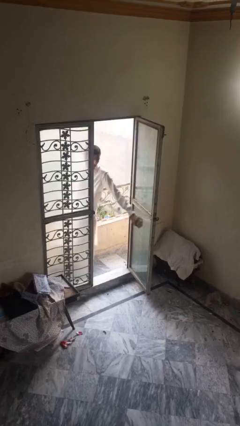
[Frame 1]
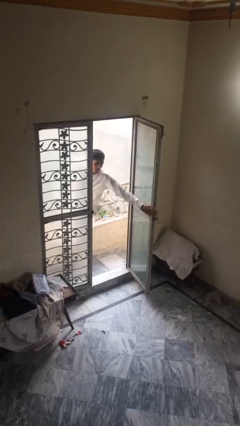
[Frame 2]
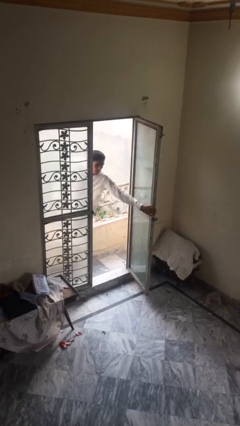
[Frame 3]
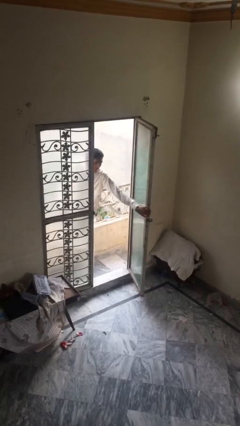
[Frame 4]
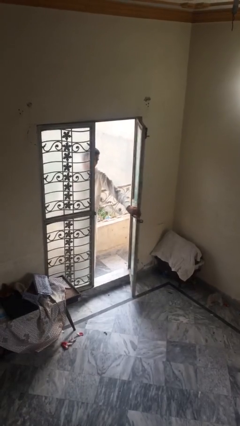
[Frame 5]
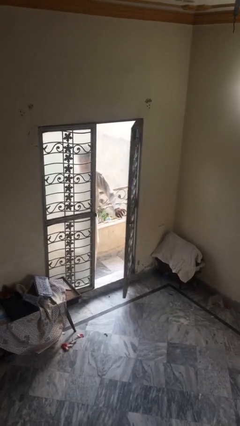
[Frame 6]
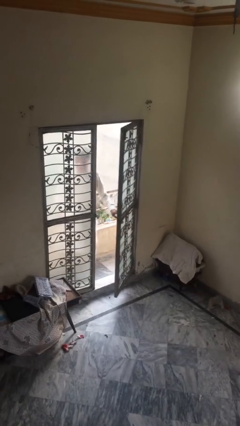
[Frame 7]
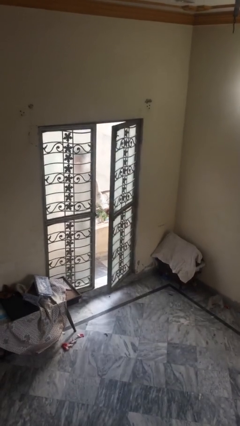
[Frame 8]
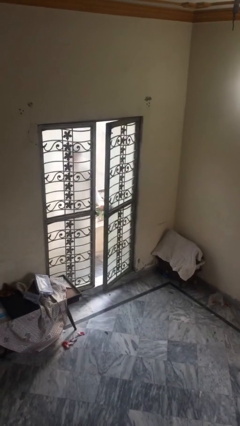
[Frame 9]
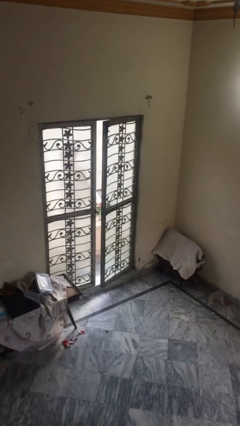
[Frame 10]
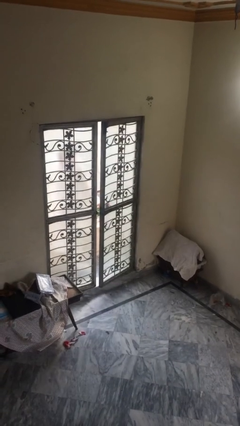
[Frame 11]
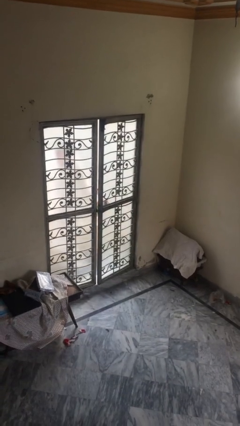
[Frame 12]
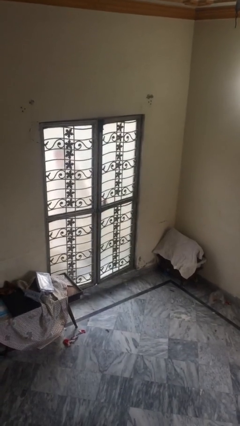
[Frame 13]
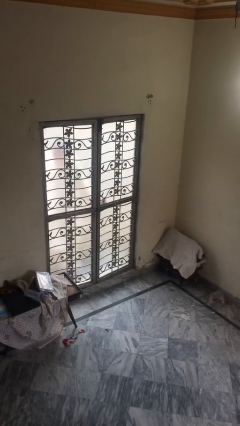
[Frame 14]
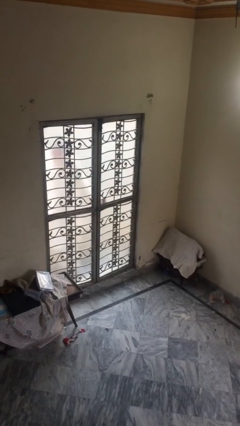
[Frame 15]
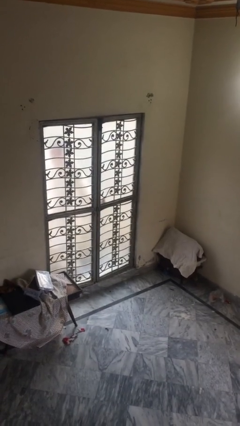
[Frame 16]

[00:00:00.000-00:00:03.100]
person closes facility door

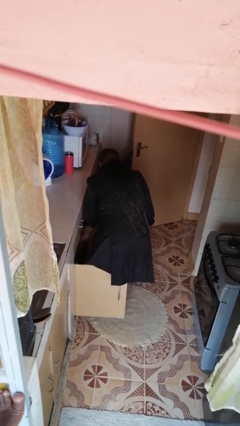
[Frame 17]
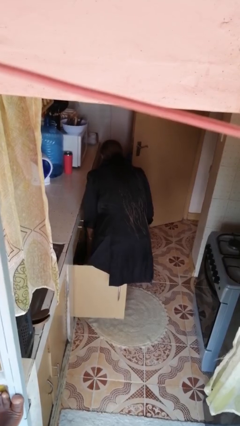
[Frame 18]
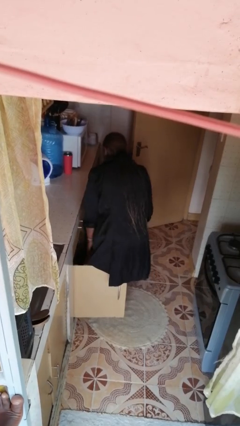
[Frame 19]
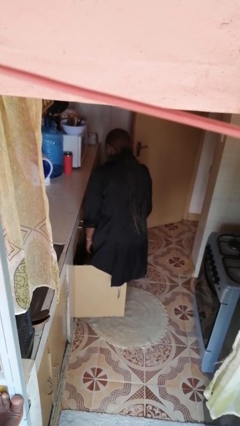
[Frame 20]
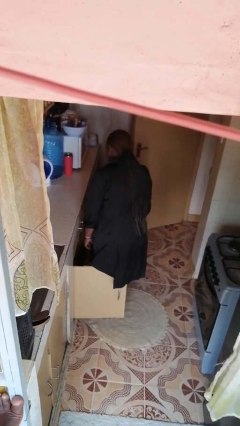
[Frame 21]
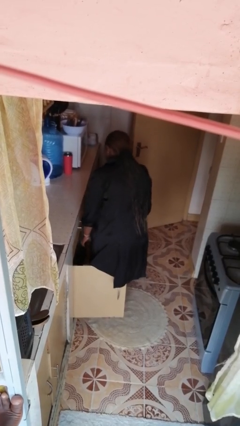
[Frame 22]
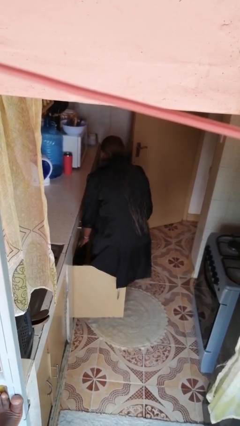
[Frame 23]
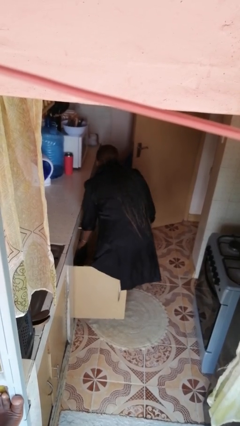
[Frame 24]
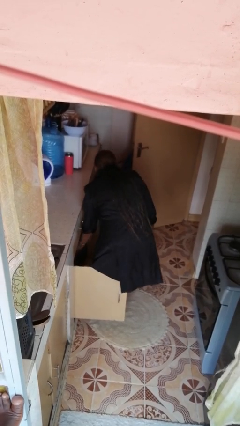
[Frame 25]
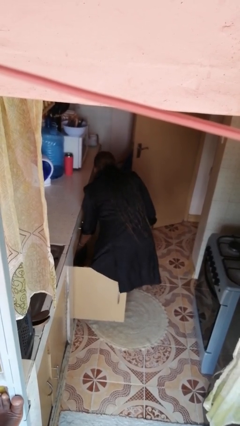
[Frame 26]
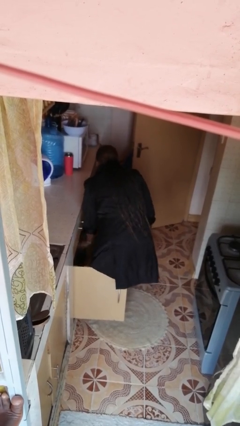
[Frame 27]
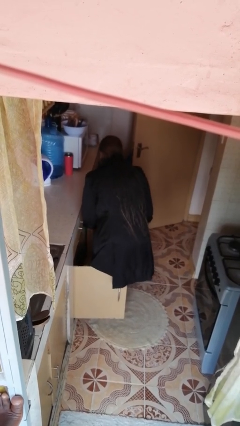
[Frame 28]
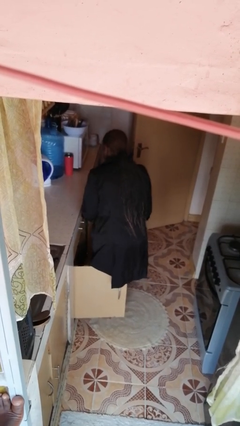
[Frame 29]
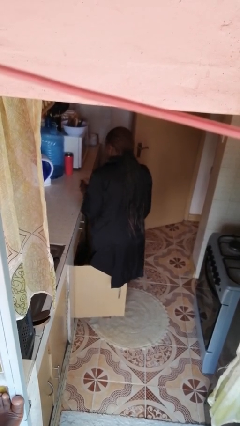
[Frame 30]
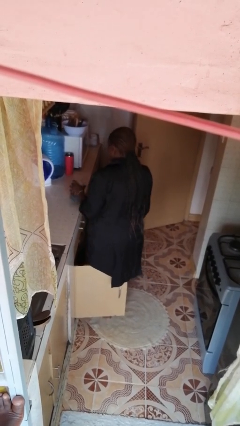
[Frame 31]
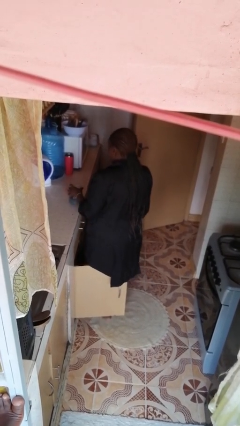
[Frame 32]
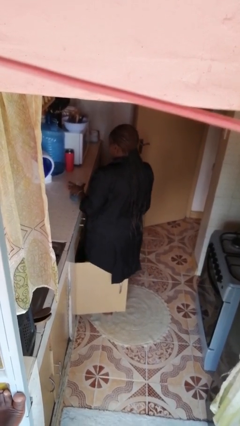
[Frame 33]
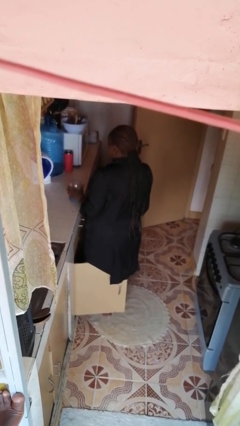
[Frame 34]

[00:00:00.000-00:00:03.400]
person takes object from cabinet

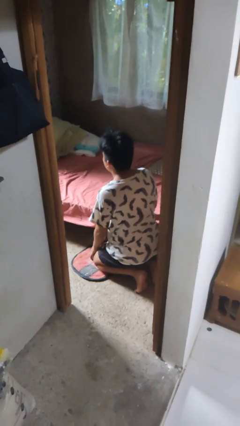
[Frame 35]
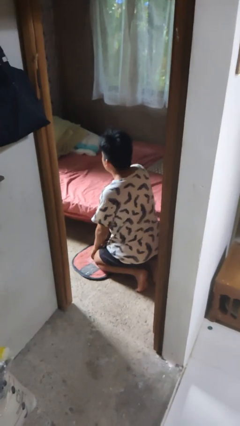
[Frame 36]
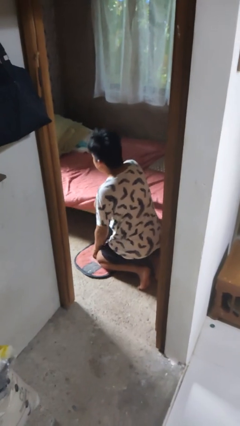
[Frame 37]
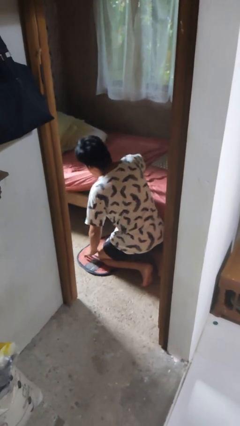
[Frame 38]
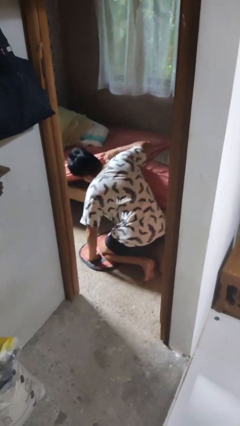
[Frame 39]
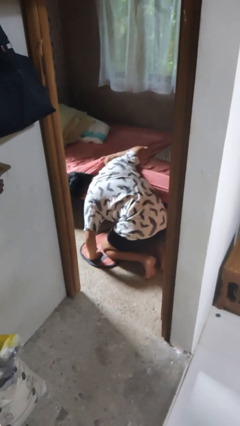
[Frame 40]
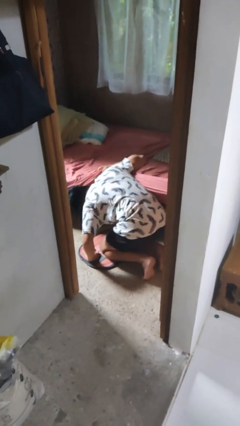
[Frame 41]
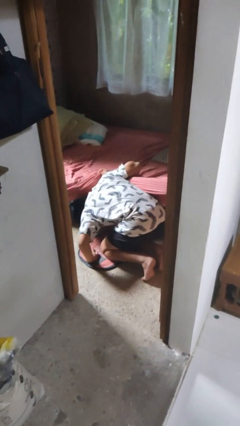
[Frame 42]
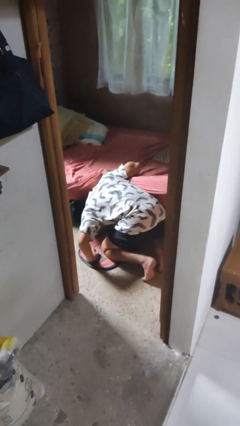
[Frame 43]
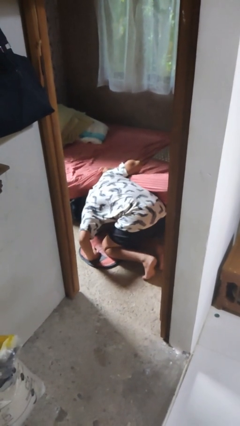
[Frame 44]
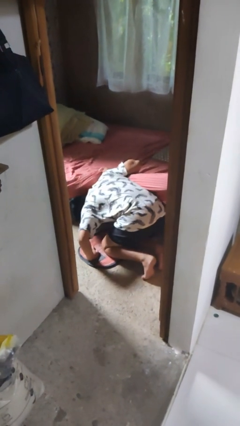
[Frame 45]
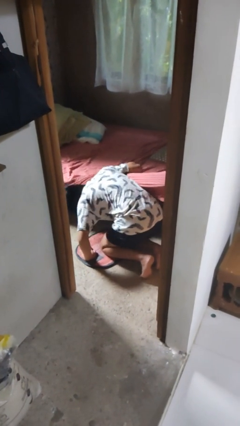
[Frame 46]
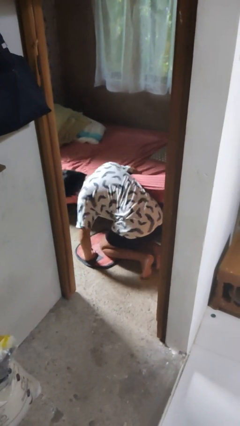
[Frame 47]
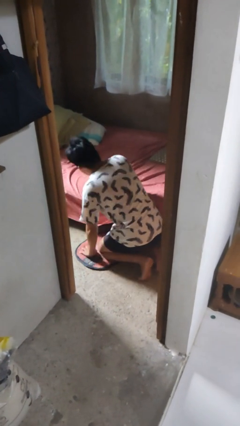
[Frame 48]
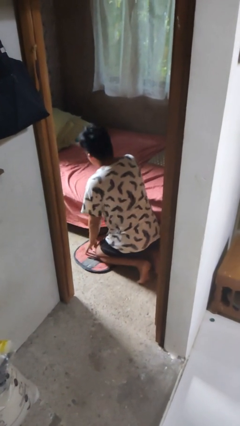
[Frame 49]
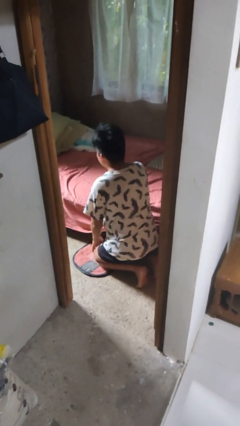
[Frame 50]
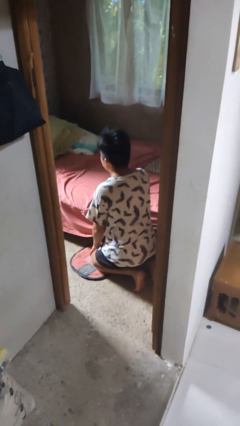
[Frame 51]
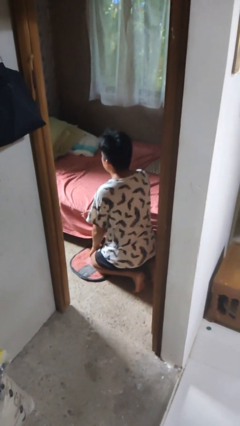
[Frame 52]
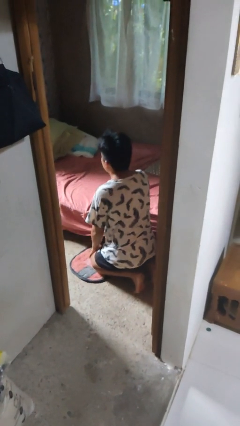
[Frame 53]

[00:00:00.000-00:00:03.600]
person searches under bed

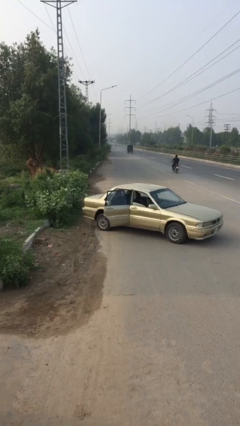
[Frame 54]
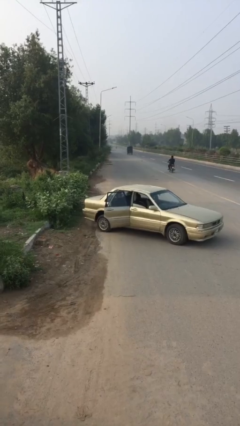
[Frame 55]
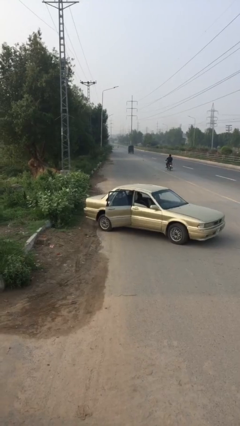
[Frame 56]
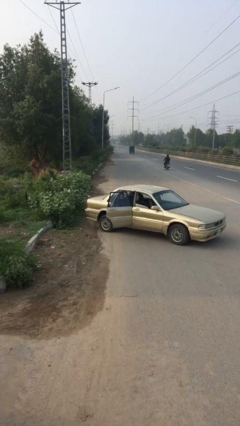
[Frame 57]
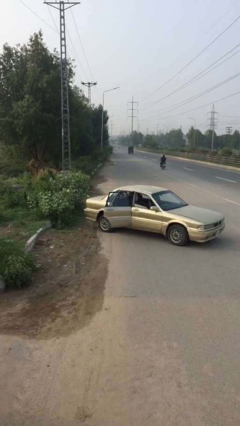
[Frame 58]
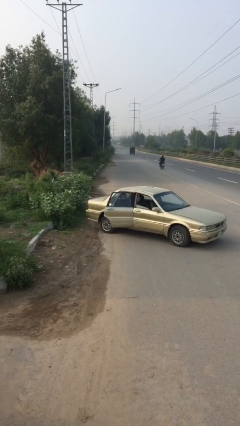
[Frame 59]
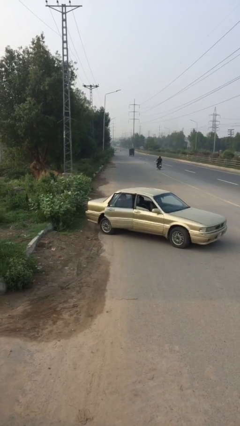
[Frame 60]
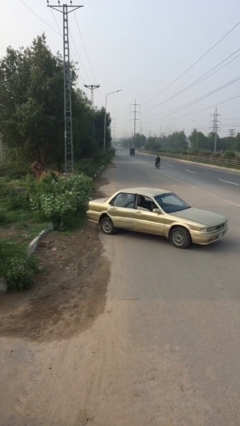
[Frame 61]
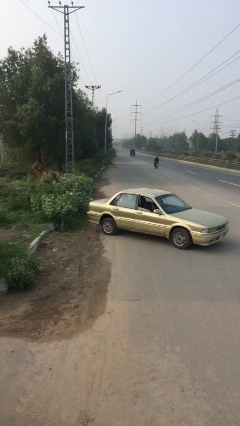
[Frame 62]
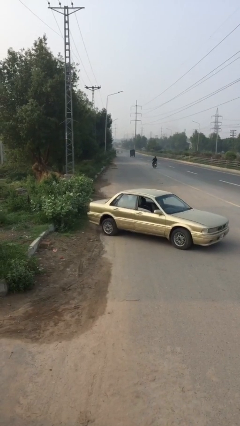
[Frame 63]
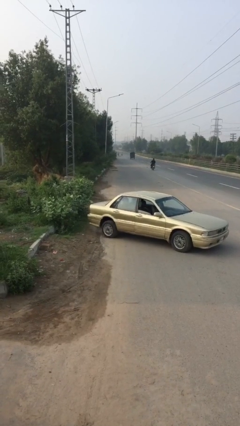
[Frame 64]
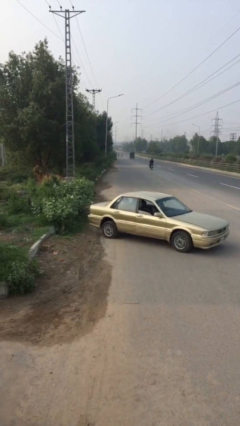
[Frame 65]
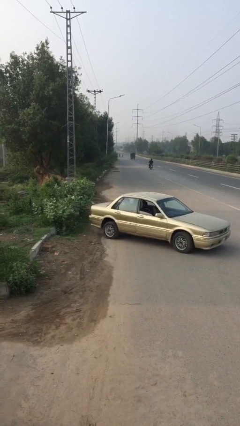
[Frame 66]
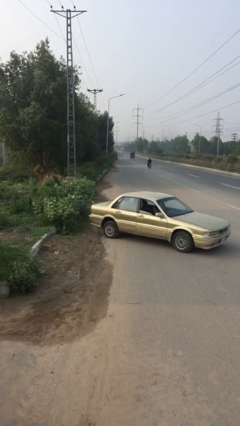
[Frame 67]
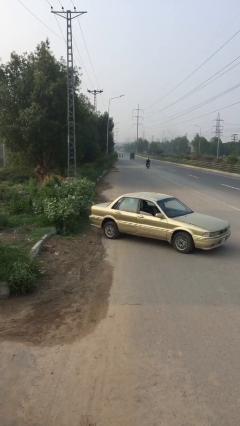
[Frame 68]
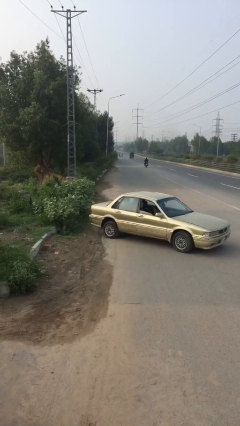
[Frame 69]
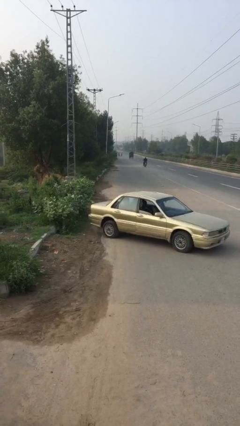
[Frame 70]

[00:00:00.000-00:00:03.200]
person closes car door

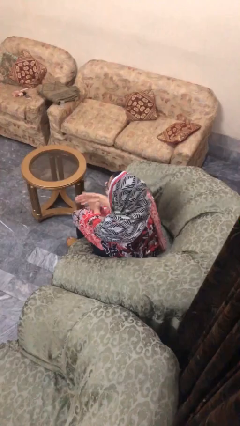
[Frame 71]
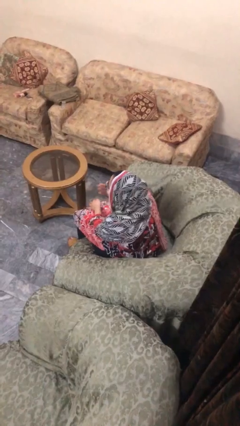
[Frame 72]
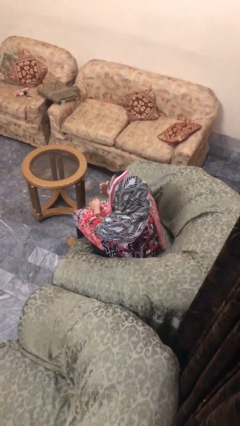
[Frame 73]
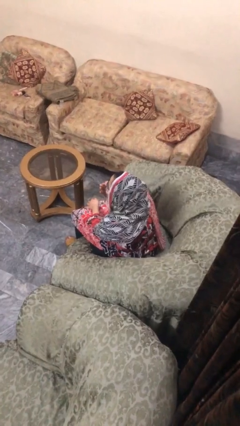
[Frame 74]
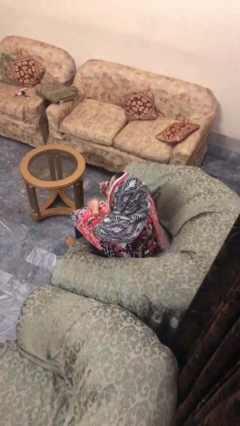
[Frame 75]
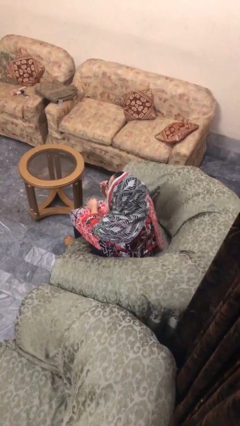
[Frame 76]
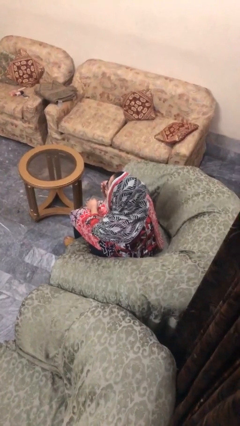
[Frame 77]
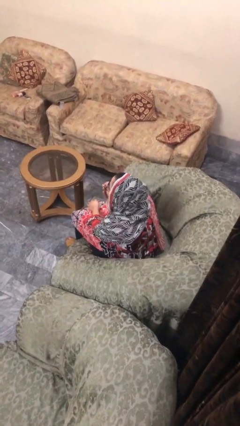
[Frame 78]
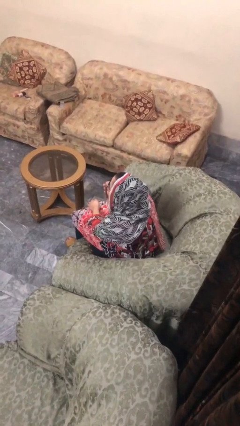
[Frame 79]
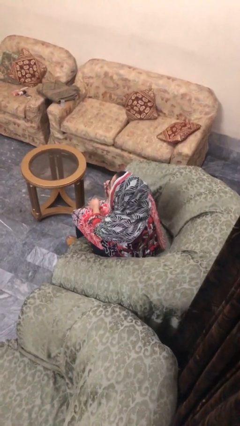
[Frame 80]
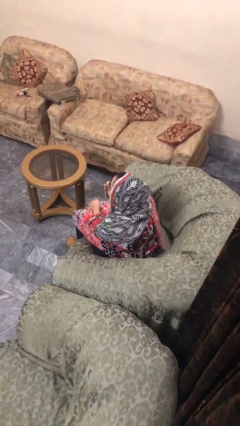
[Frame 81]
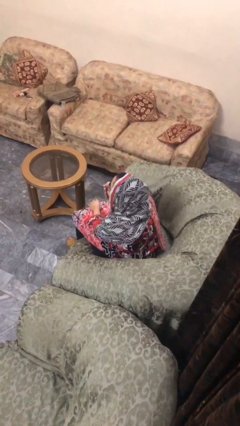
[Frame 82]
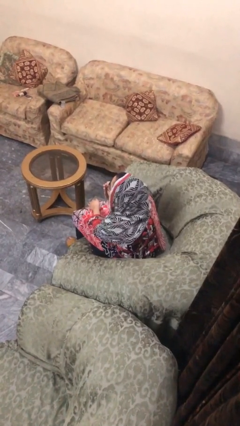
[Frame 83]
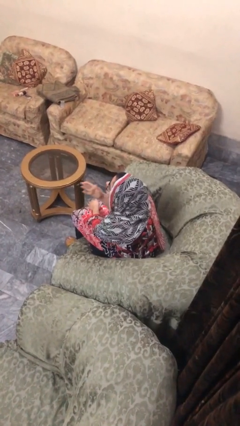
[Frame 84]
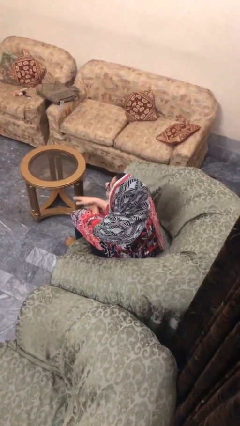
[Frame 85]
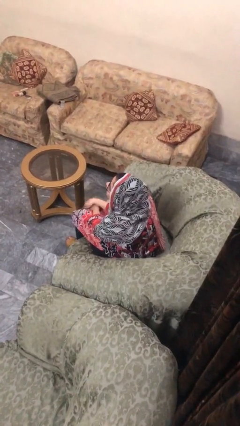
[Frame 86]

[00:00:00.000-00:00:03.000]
person yawns

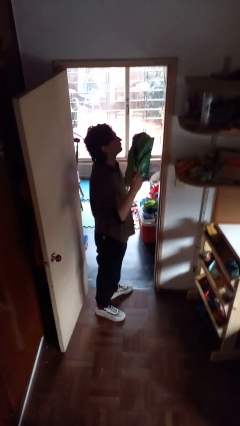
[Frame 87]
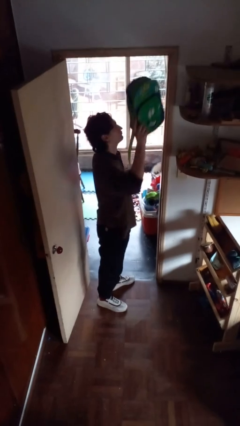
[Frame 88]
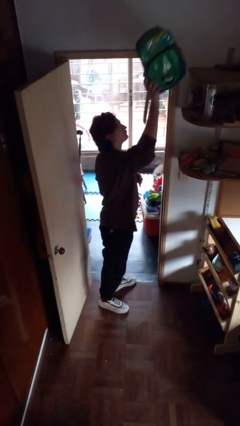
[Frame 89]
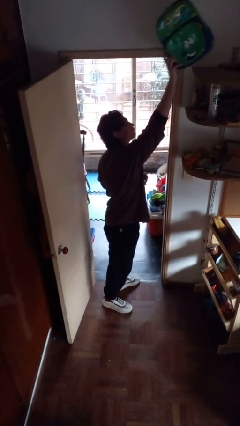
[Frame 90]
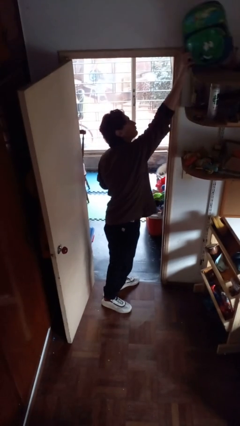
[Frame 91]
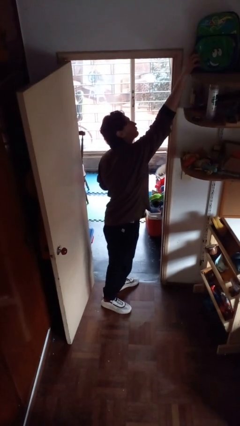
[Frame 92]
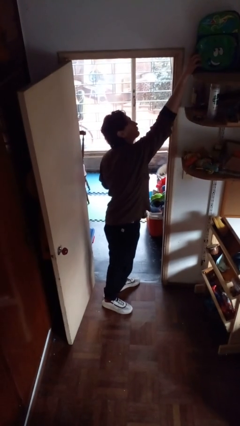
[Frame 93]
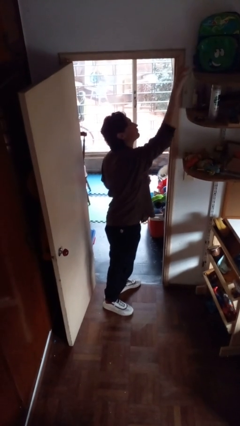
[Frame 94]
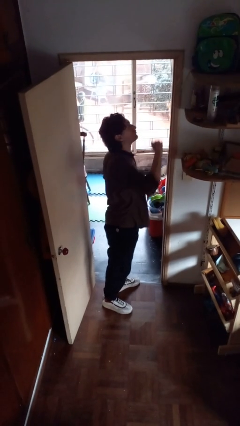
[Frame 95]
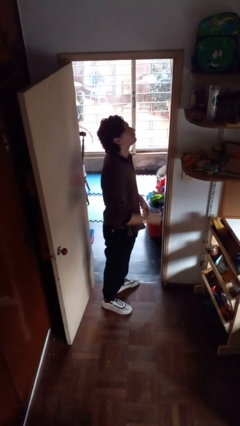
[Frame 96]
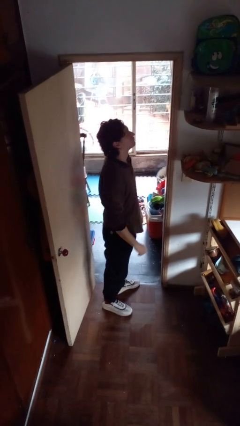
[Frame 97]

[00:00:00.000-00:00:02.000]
person picks up object from shelf
